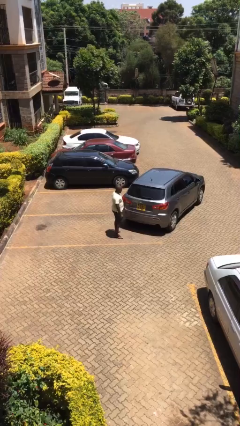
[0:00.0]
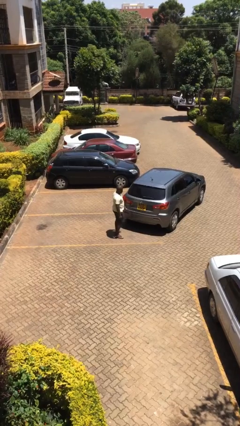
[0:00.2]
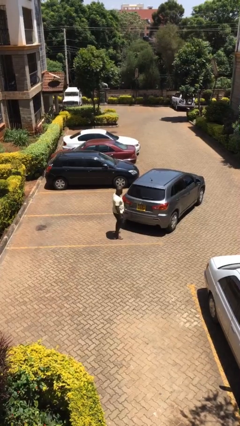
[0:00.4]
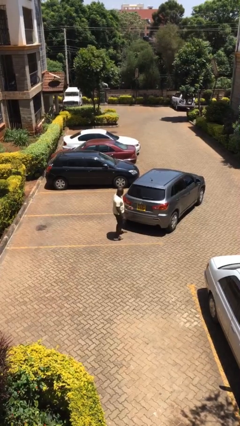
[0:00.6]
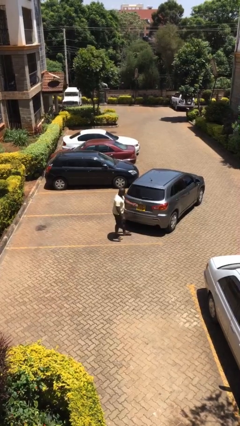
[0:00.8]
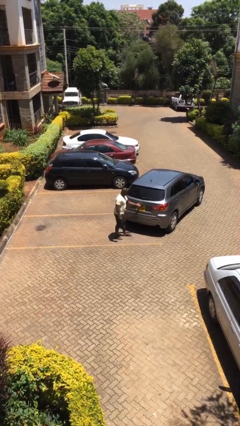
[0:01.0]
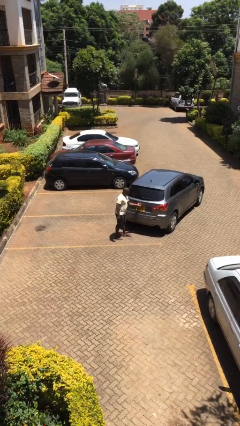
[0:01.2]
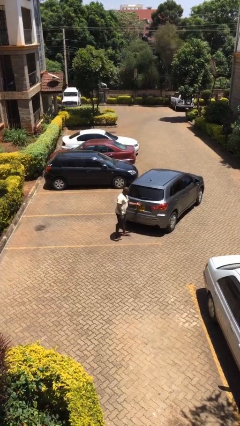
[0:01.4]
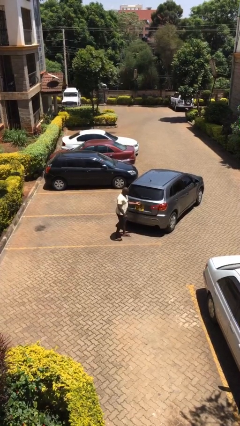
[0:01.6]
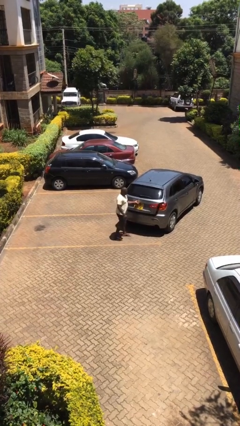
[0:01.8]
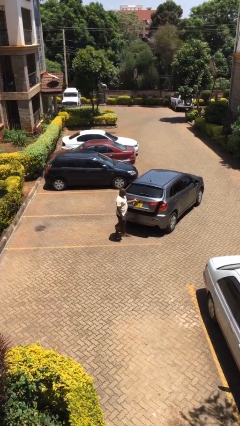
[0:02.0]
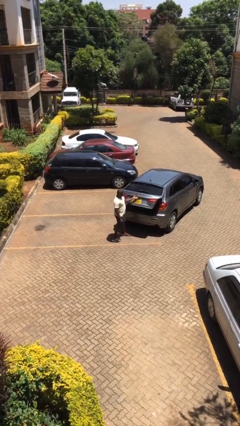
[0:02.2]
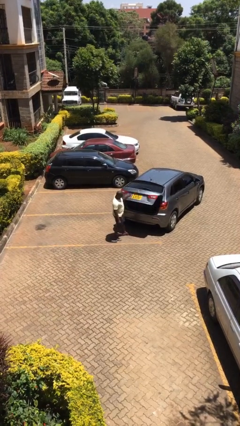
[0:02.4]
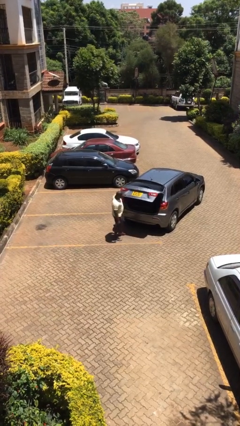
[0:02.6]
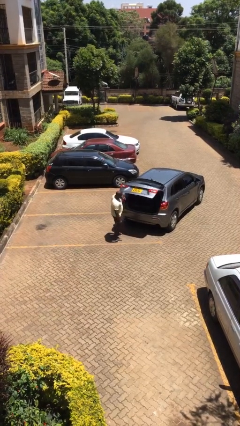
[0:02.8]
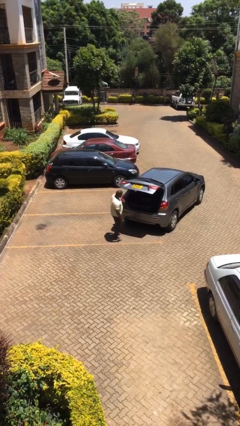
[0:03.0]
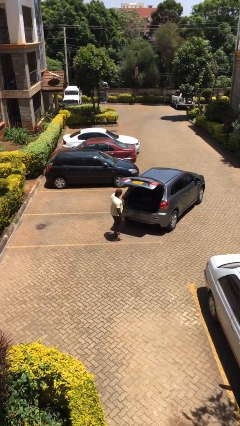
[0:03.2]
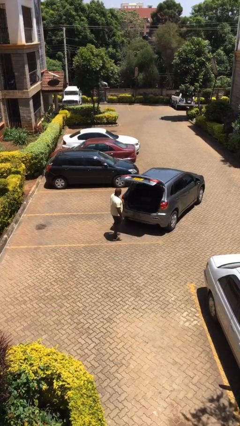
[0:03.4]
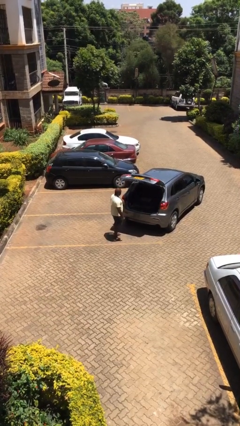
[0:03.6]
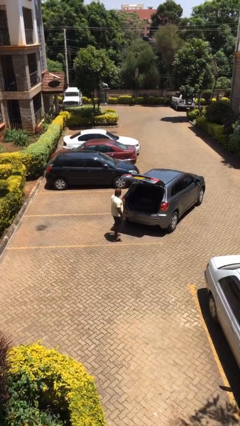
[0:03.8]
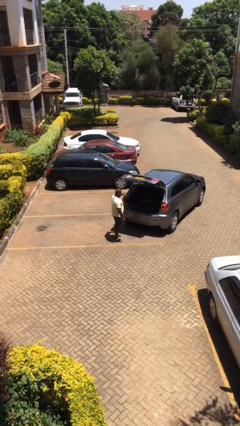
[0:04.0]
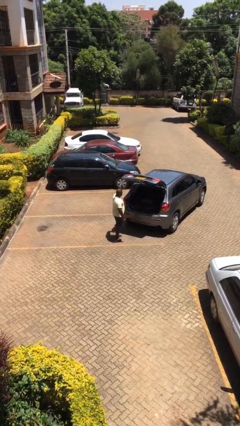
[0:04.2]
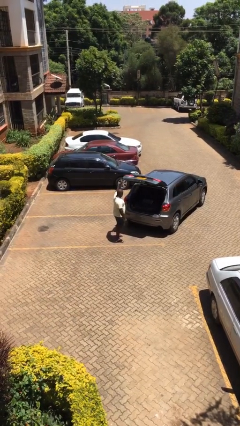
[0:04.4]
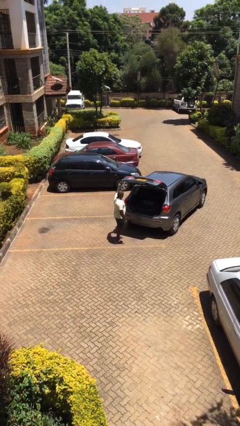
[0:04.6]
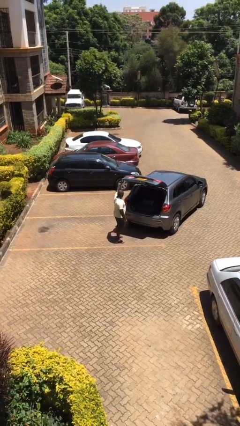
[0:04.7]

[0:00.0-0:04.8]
person opens car trunk

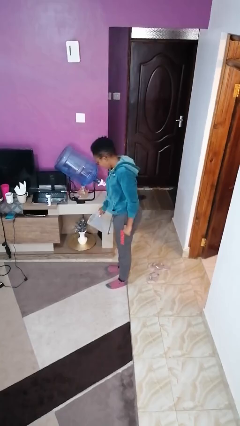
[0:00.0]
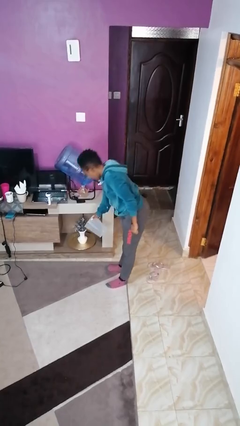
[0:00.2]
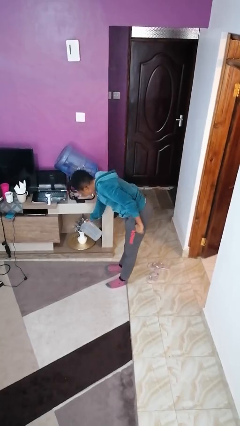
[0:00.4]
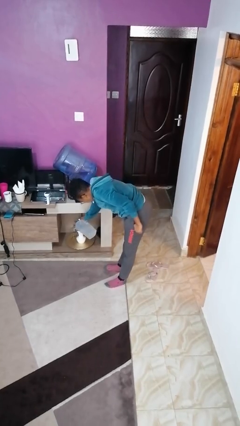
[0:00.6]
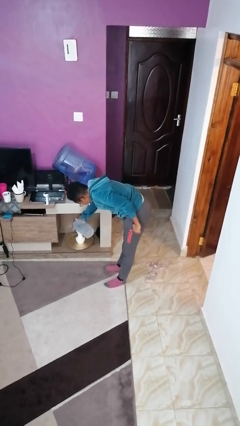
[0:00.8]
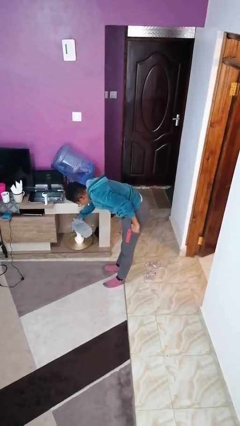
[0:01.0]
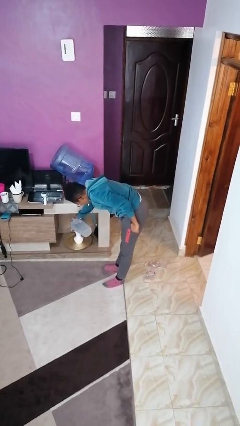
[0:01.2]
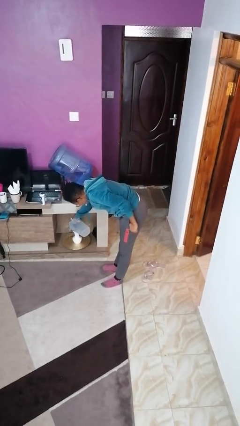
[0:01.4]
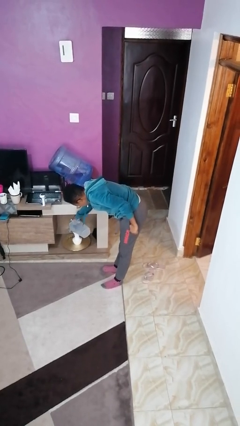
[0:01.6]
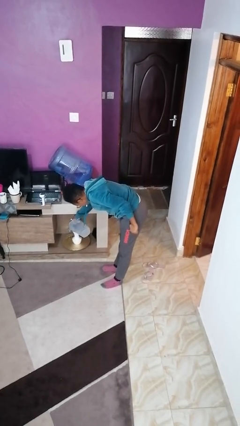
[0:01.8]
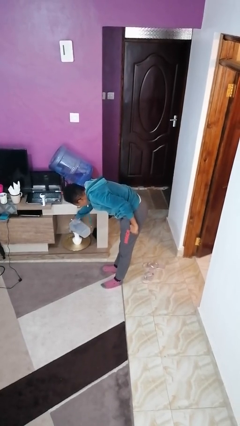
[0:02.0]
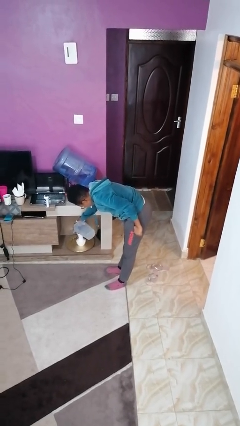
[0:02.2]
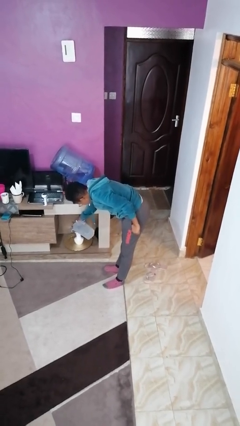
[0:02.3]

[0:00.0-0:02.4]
person waters houseplant

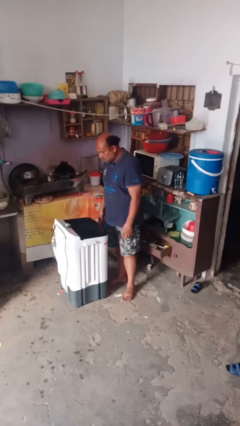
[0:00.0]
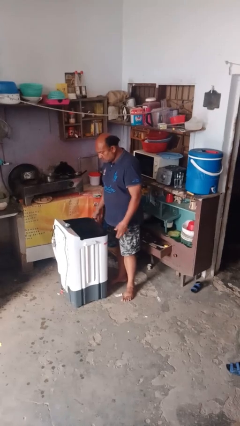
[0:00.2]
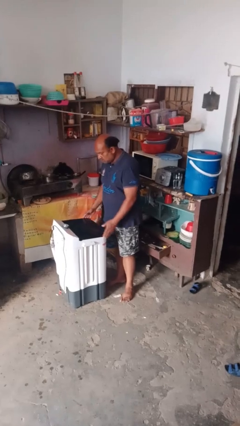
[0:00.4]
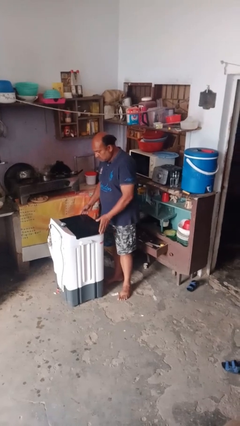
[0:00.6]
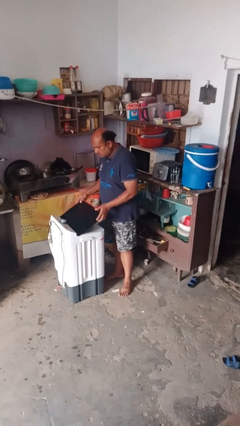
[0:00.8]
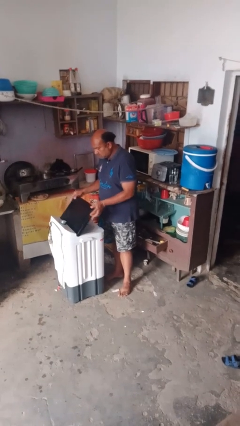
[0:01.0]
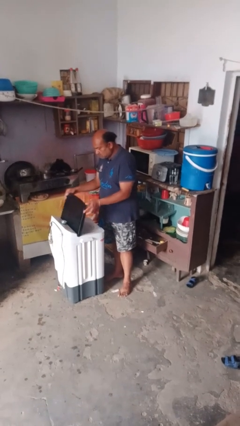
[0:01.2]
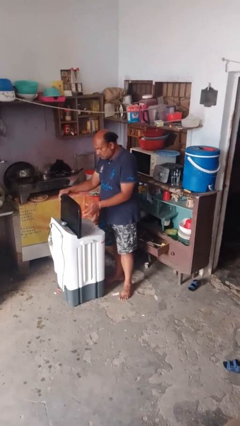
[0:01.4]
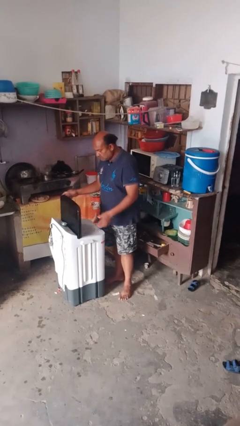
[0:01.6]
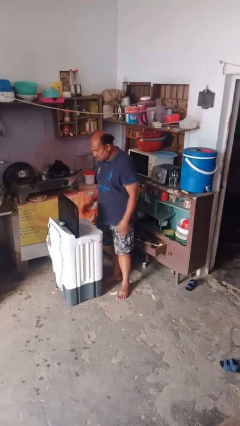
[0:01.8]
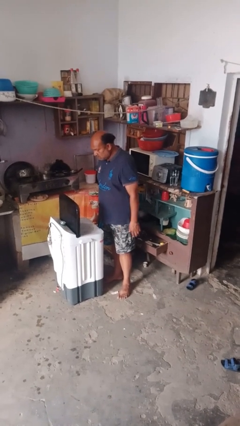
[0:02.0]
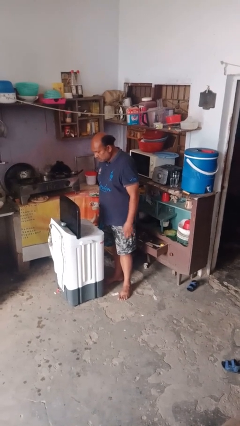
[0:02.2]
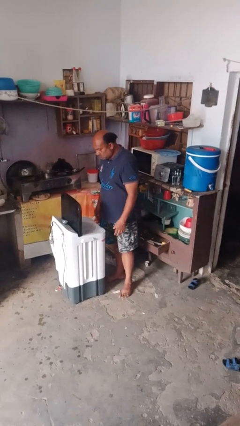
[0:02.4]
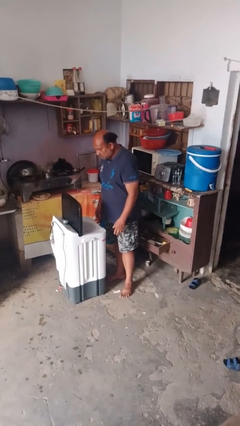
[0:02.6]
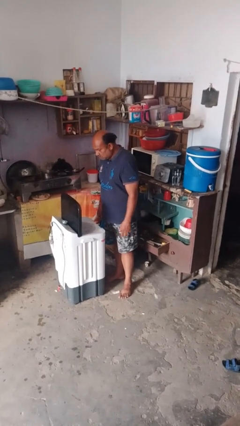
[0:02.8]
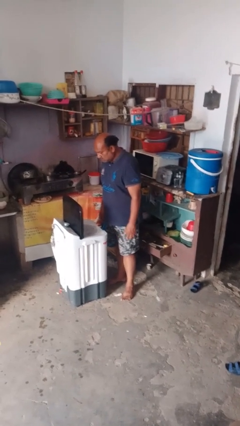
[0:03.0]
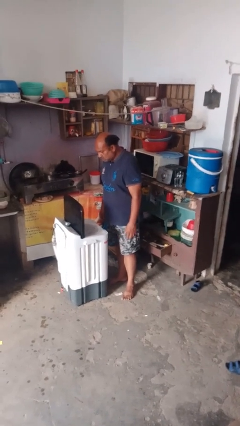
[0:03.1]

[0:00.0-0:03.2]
person opens clothes washer

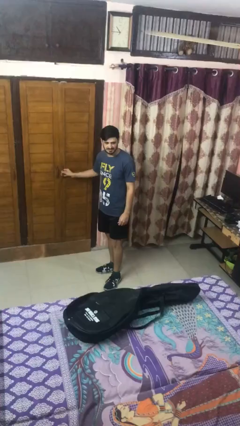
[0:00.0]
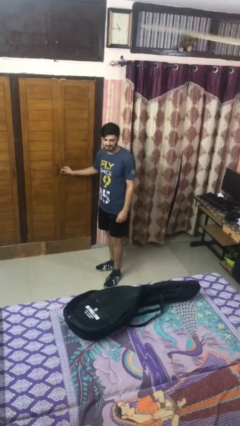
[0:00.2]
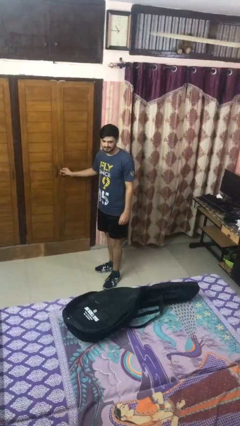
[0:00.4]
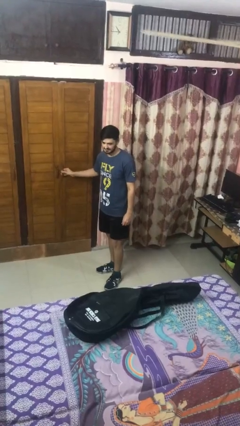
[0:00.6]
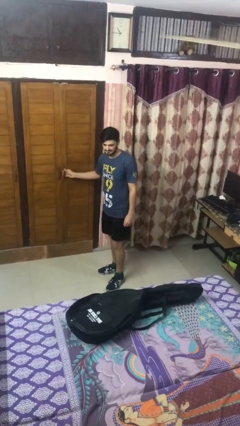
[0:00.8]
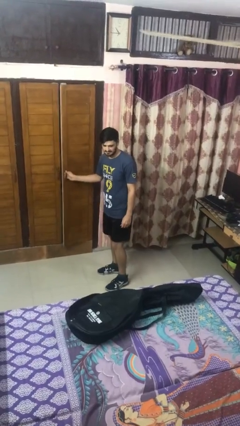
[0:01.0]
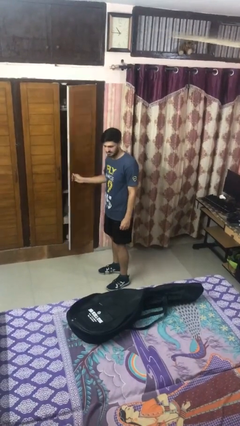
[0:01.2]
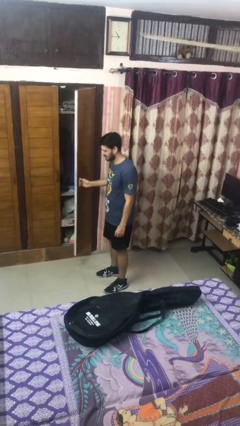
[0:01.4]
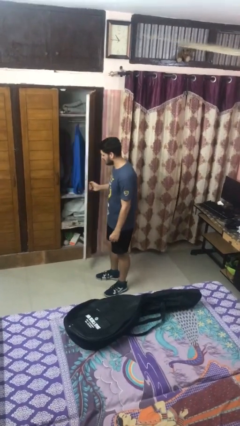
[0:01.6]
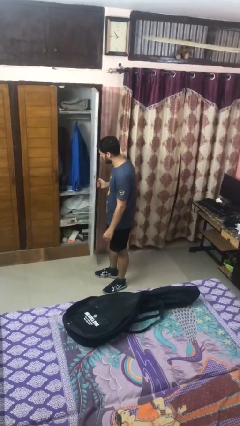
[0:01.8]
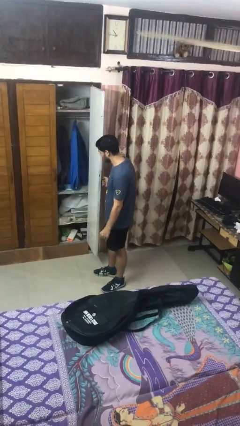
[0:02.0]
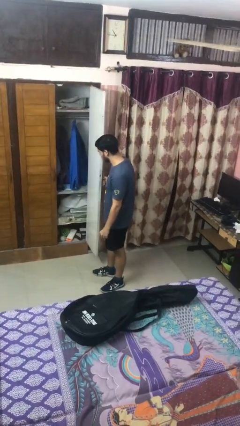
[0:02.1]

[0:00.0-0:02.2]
person opens closet door

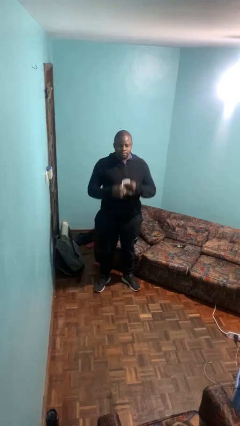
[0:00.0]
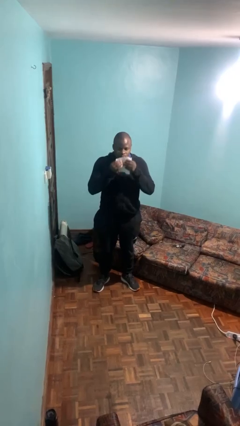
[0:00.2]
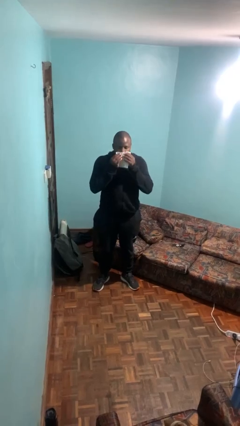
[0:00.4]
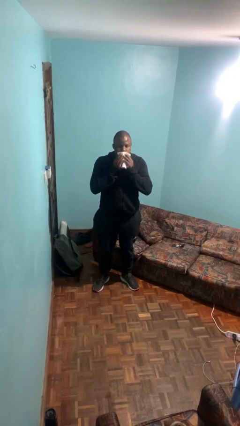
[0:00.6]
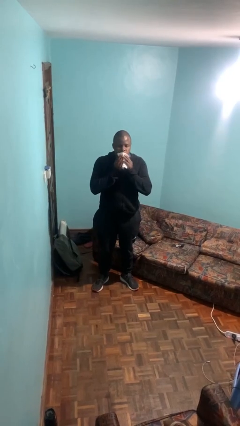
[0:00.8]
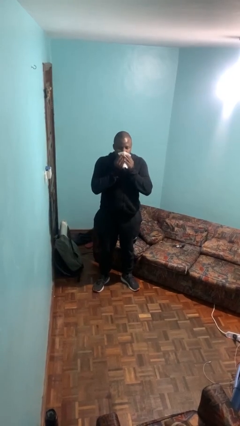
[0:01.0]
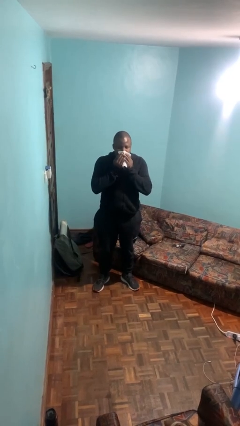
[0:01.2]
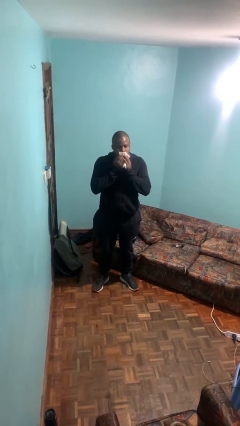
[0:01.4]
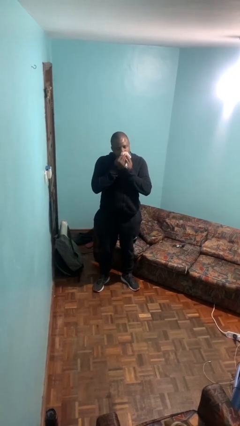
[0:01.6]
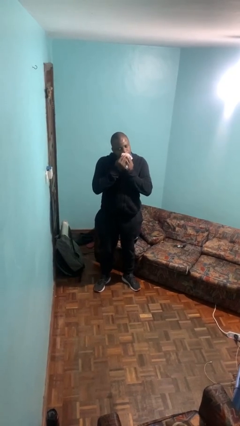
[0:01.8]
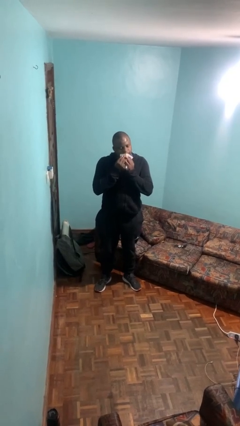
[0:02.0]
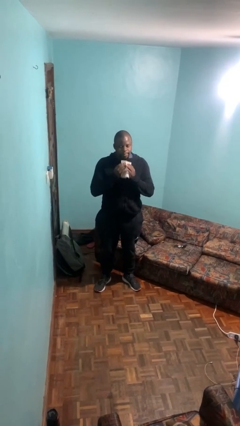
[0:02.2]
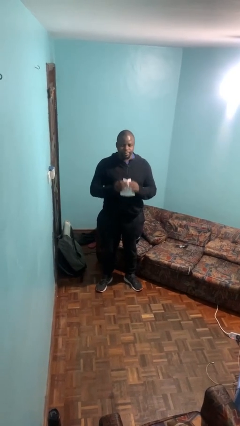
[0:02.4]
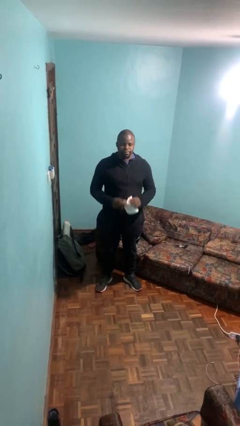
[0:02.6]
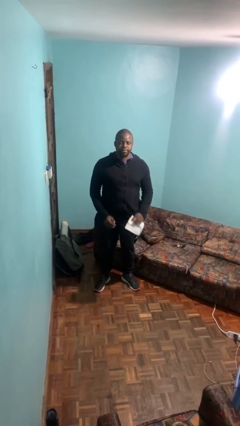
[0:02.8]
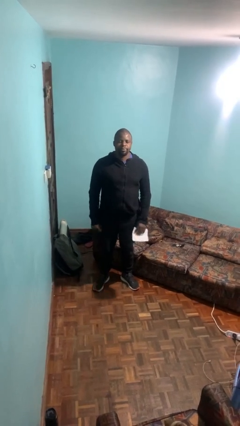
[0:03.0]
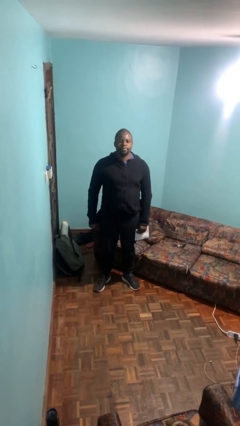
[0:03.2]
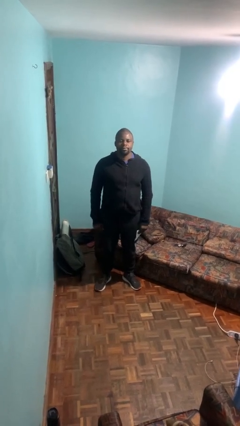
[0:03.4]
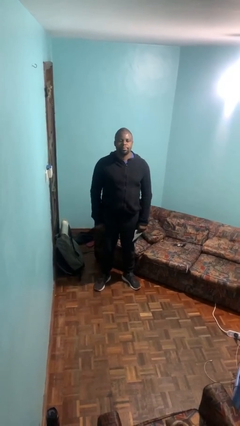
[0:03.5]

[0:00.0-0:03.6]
person wipes mouth with napkin

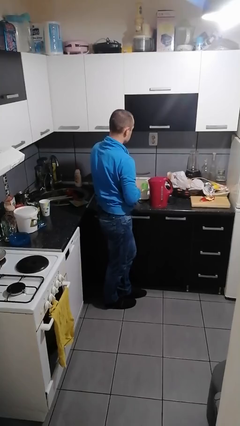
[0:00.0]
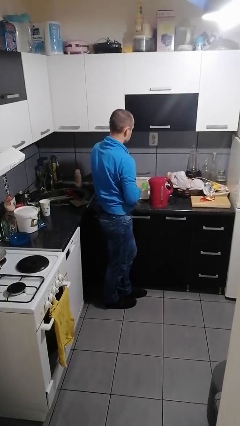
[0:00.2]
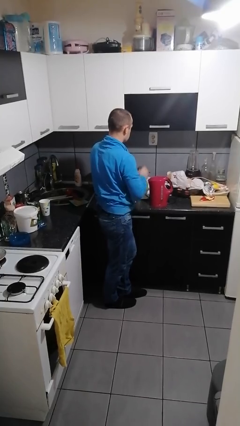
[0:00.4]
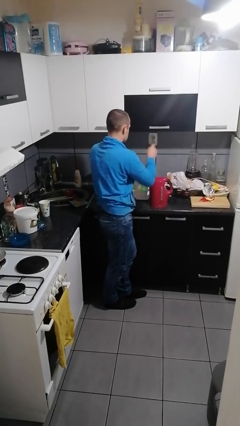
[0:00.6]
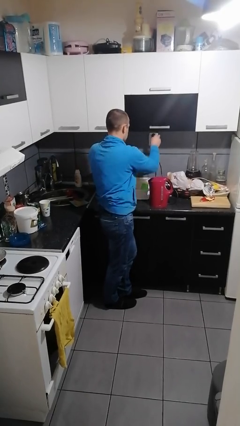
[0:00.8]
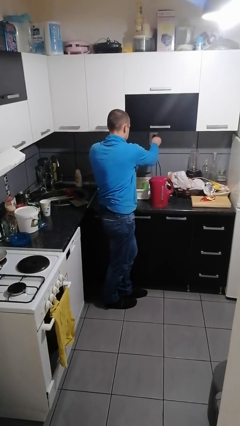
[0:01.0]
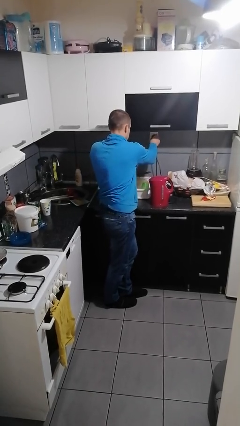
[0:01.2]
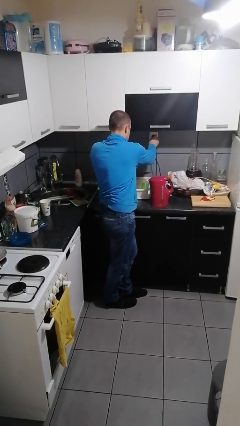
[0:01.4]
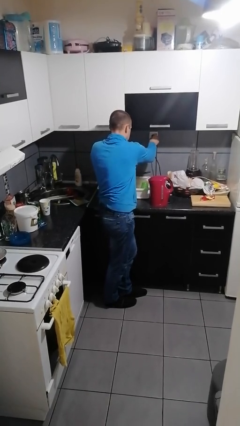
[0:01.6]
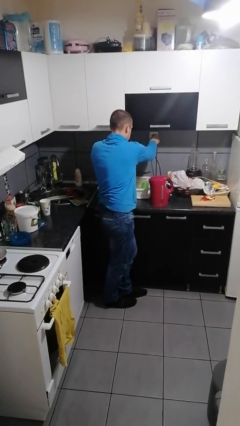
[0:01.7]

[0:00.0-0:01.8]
person plugs into electrical socket
